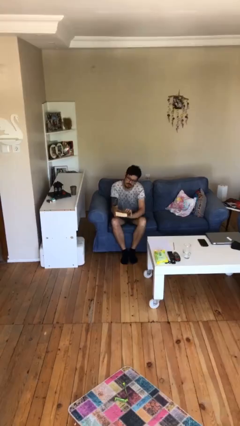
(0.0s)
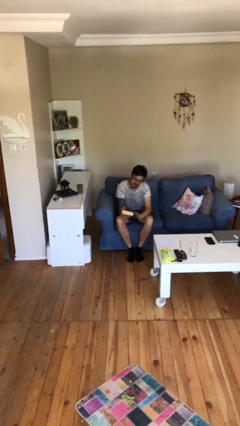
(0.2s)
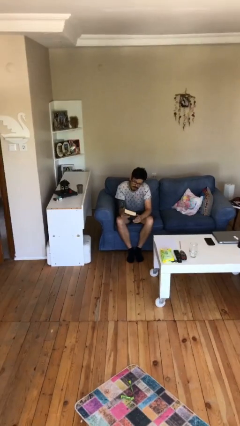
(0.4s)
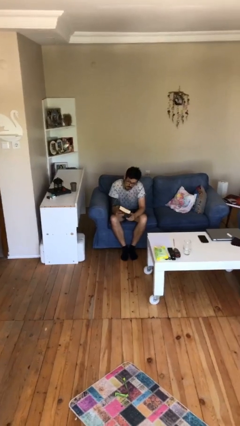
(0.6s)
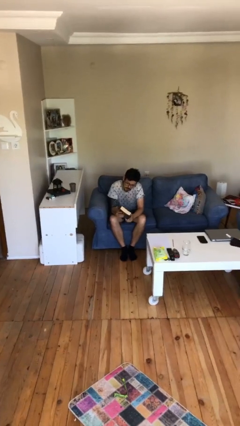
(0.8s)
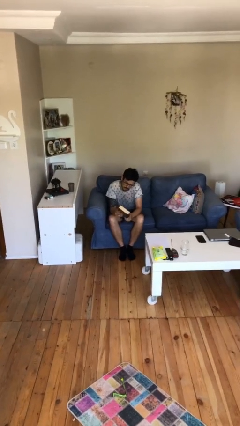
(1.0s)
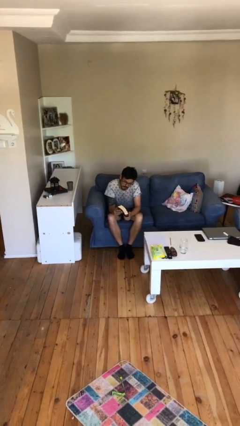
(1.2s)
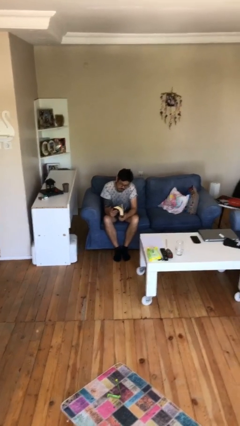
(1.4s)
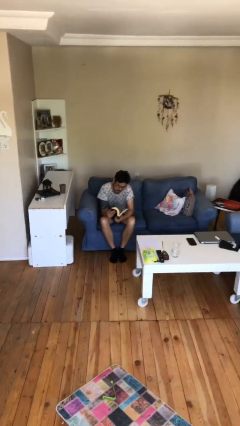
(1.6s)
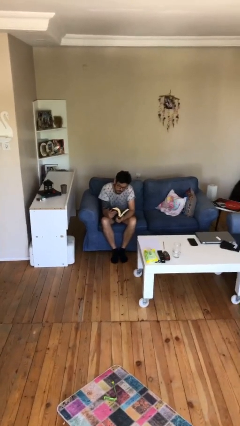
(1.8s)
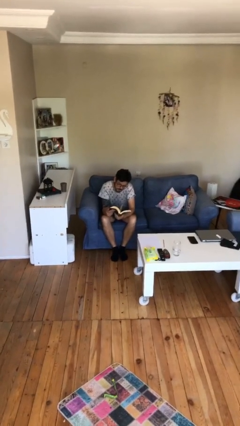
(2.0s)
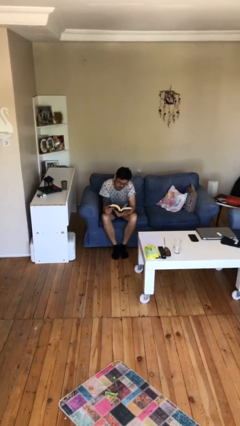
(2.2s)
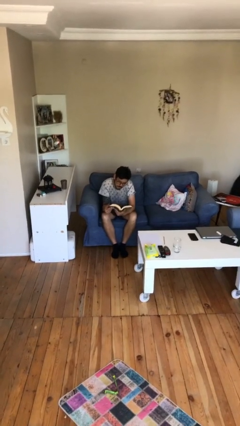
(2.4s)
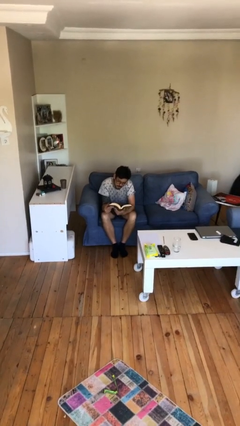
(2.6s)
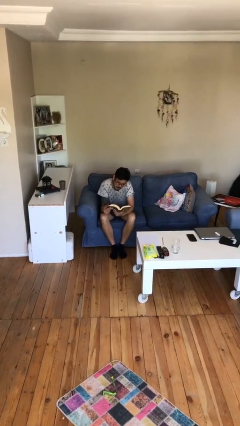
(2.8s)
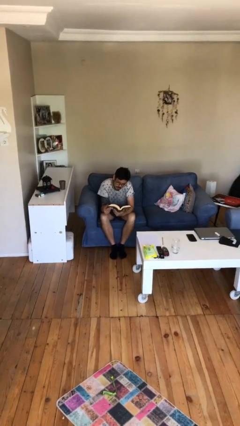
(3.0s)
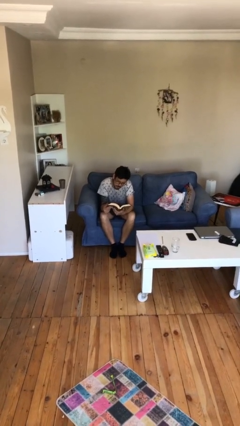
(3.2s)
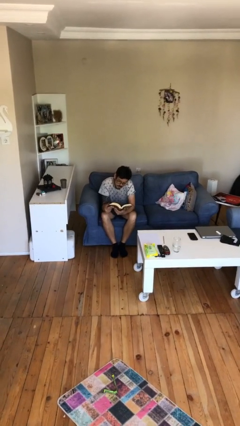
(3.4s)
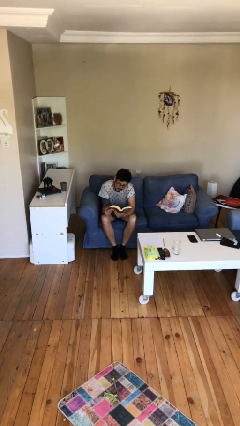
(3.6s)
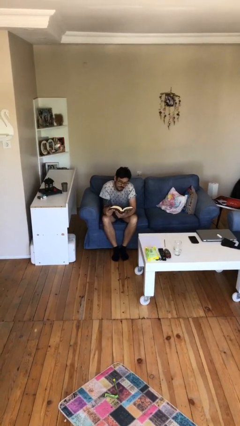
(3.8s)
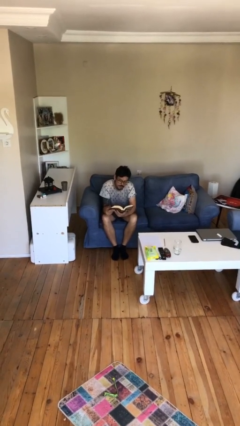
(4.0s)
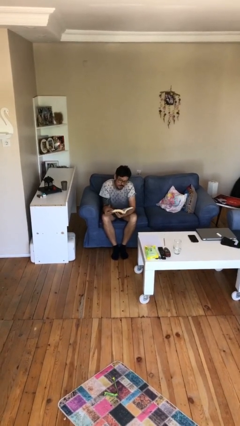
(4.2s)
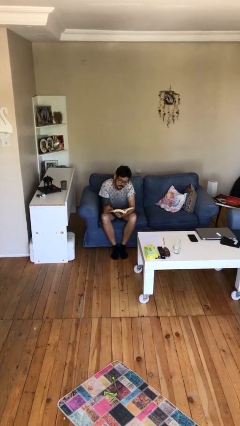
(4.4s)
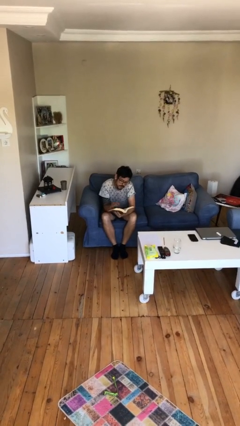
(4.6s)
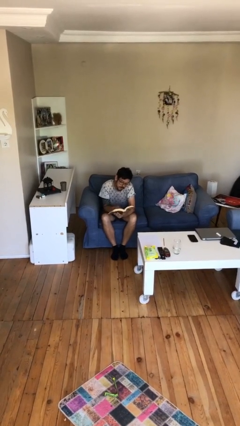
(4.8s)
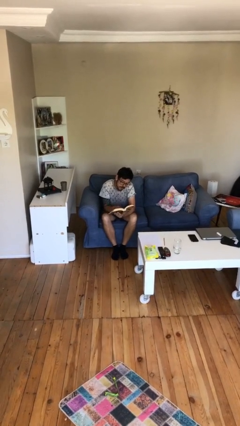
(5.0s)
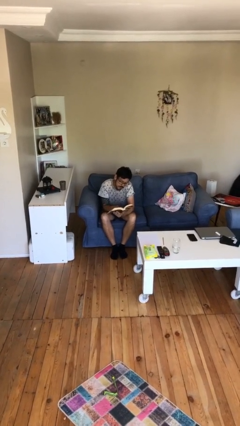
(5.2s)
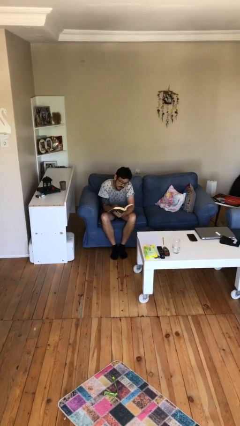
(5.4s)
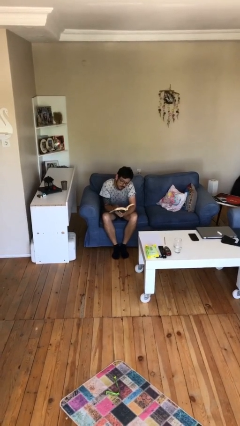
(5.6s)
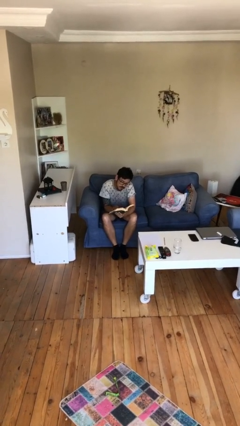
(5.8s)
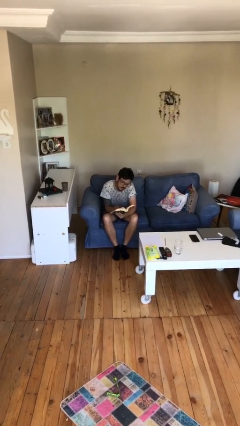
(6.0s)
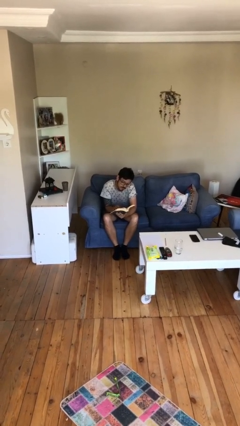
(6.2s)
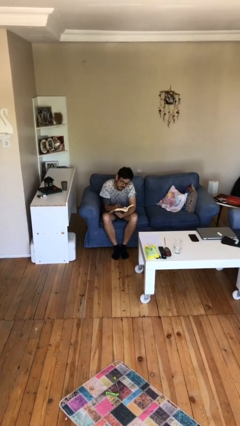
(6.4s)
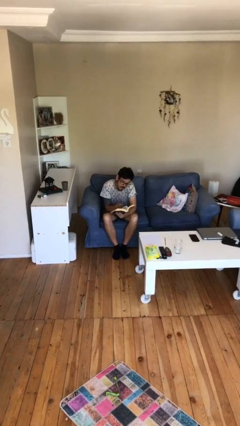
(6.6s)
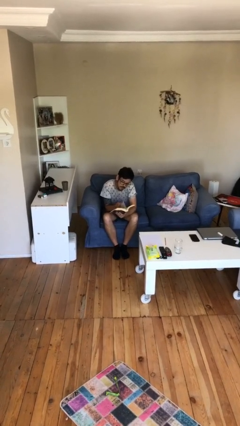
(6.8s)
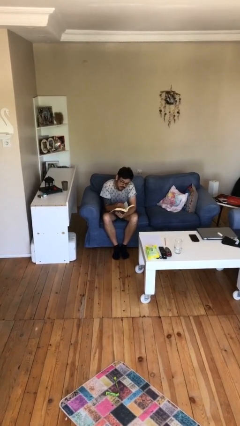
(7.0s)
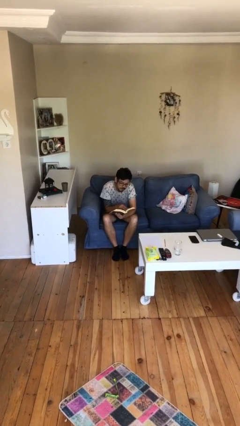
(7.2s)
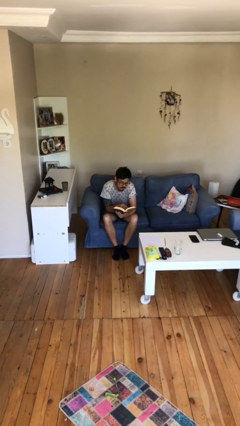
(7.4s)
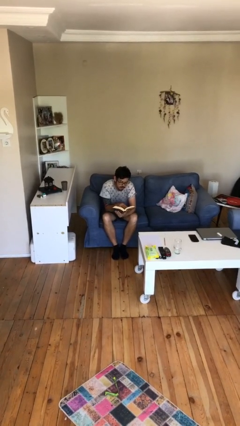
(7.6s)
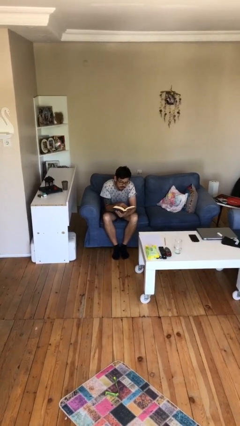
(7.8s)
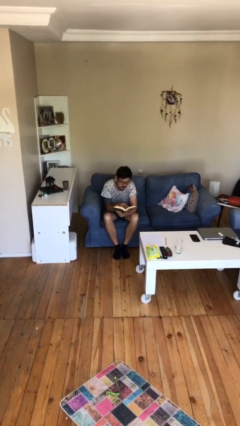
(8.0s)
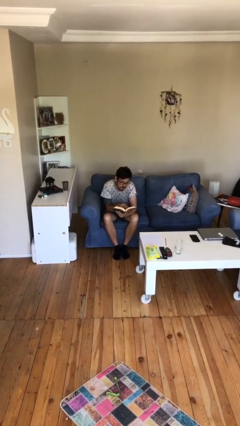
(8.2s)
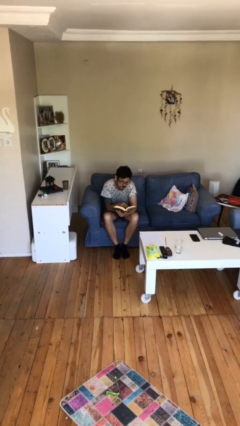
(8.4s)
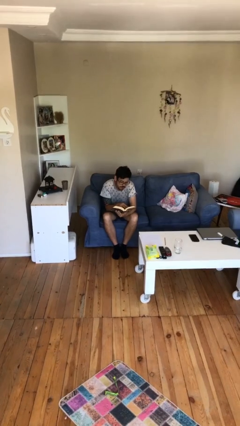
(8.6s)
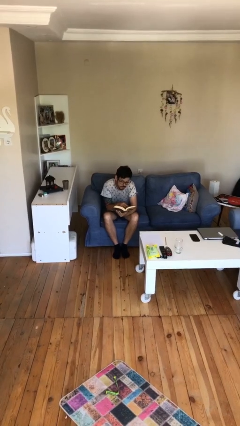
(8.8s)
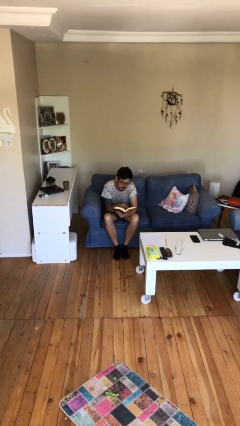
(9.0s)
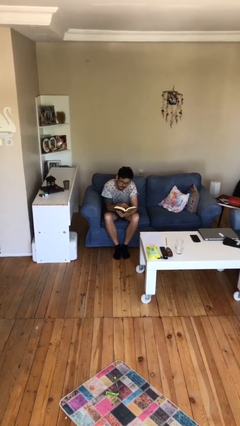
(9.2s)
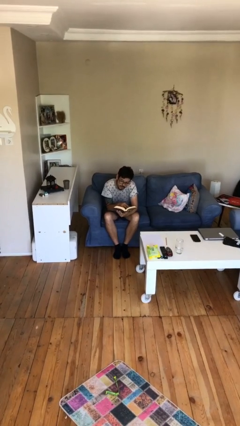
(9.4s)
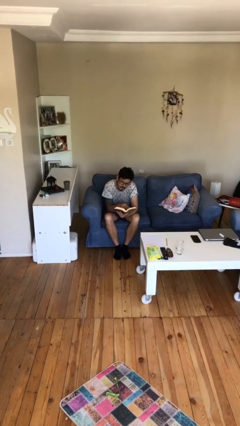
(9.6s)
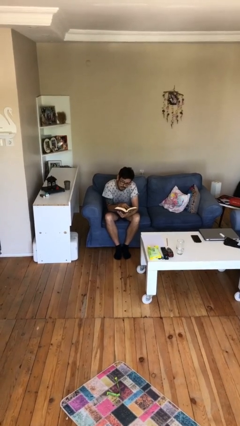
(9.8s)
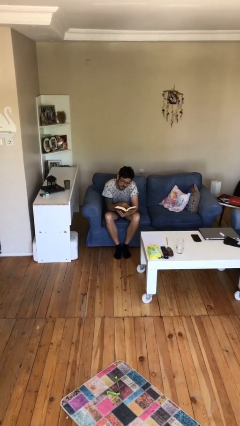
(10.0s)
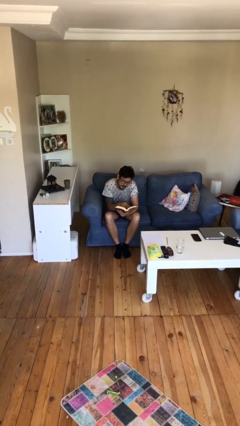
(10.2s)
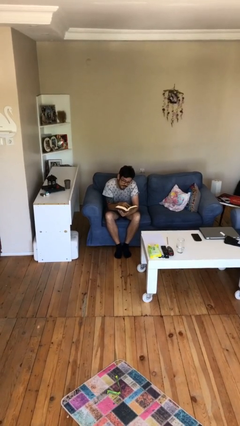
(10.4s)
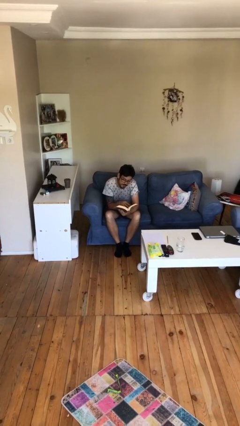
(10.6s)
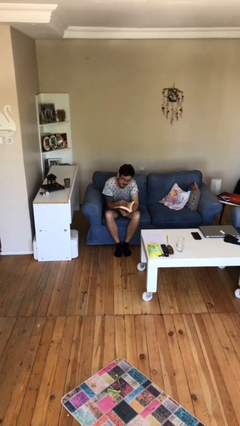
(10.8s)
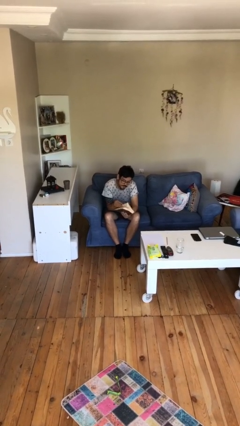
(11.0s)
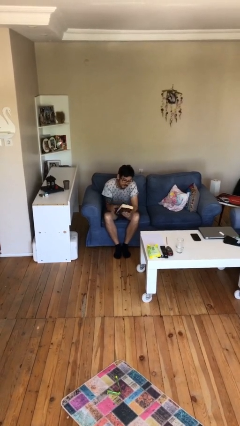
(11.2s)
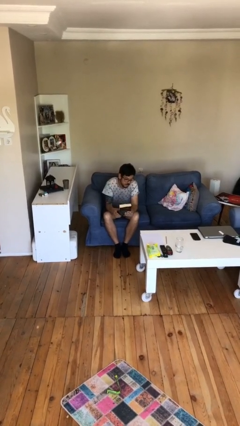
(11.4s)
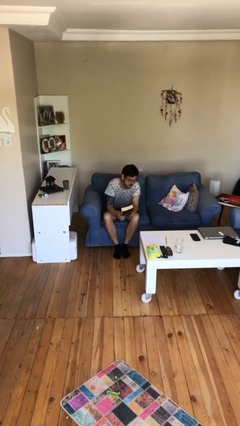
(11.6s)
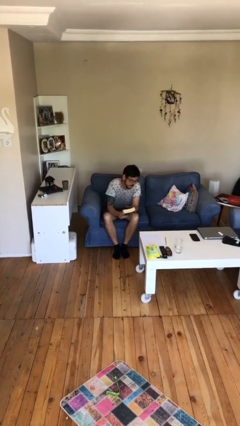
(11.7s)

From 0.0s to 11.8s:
person reads document

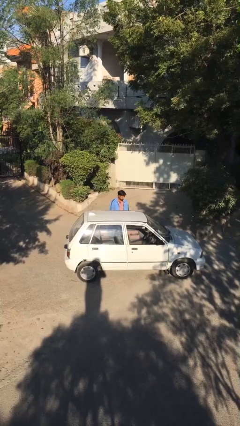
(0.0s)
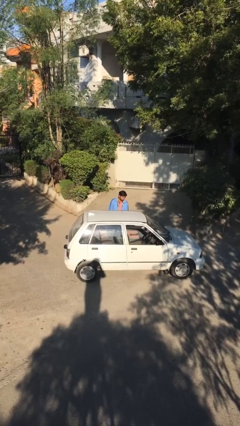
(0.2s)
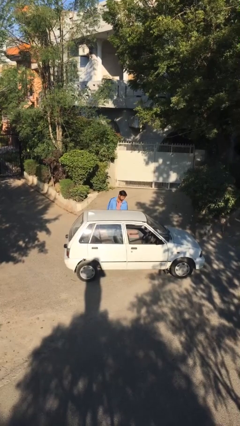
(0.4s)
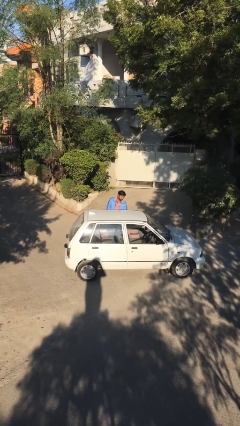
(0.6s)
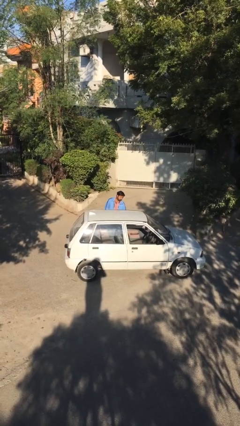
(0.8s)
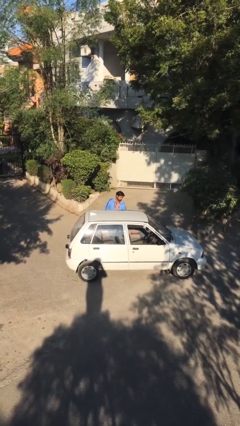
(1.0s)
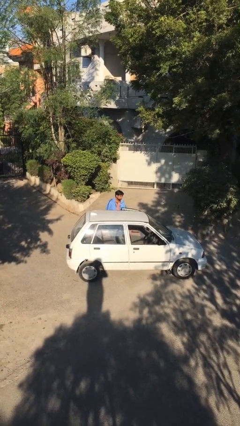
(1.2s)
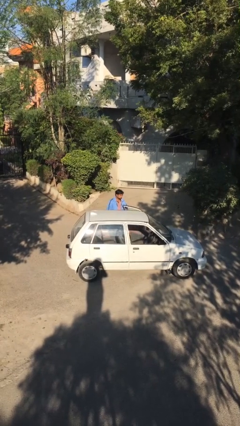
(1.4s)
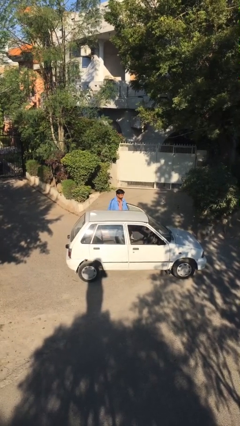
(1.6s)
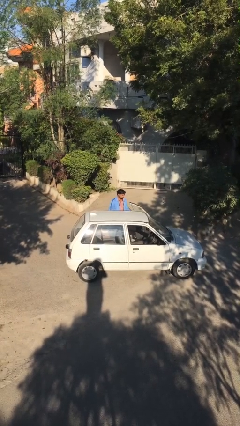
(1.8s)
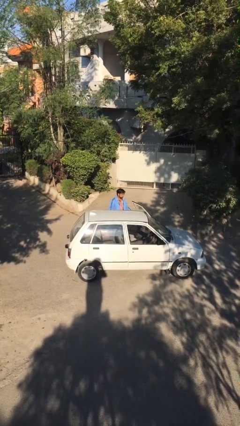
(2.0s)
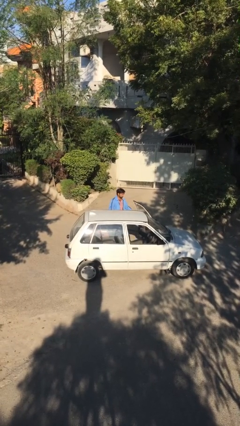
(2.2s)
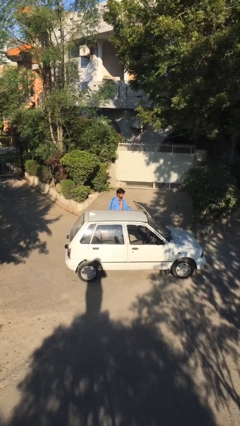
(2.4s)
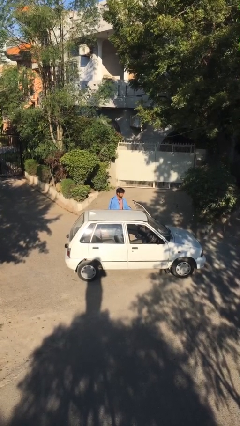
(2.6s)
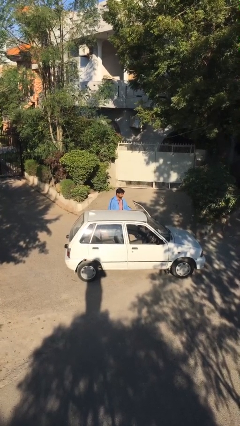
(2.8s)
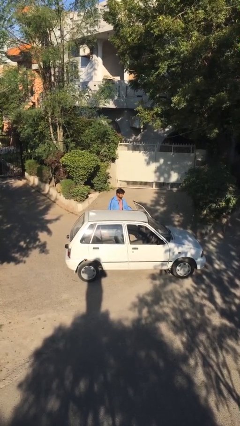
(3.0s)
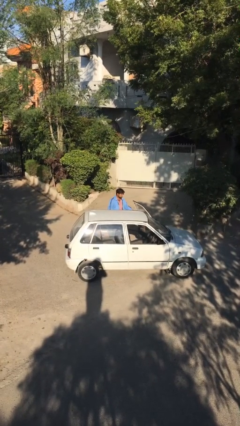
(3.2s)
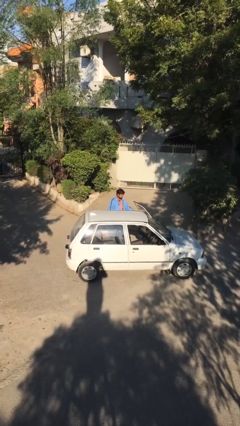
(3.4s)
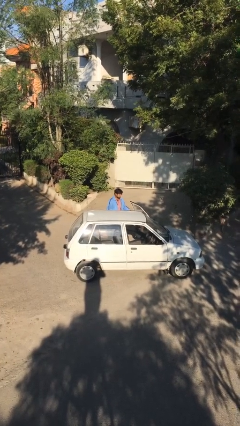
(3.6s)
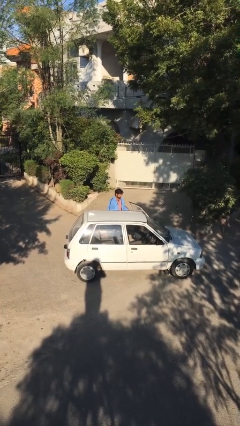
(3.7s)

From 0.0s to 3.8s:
person opens car door

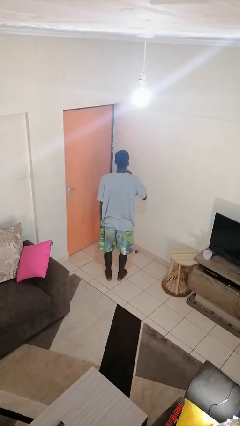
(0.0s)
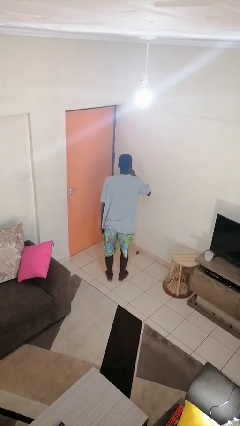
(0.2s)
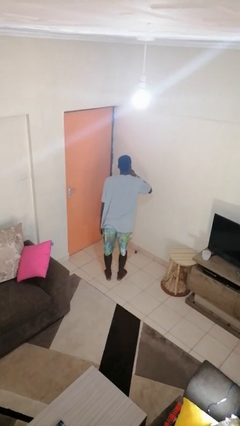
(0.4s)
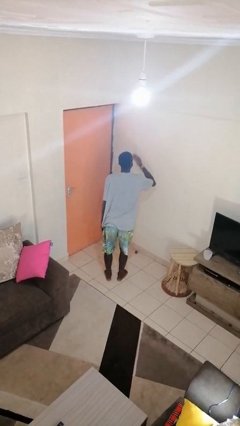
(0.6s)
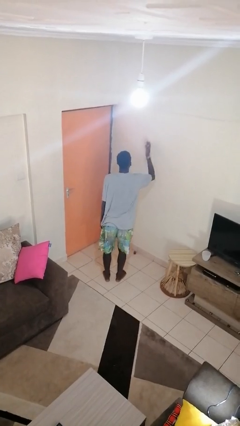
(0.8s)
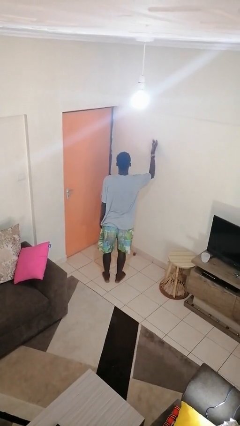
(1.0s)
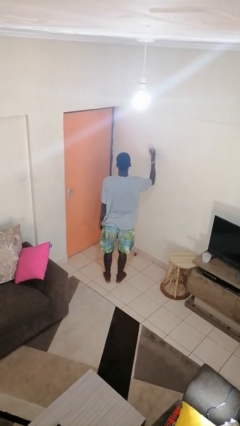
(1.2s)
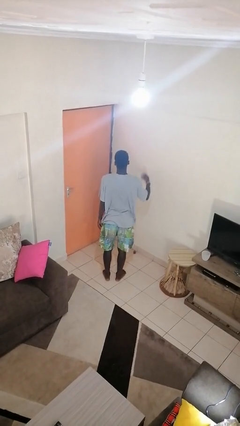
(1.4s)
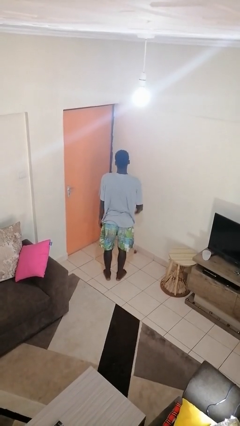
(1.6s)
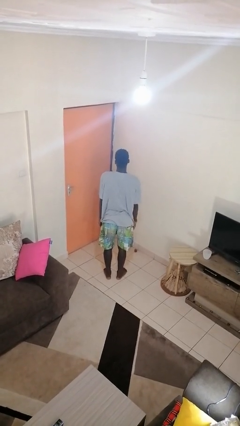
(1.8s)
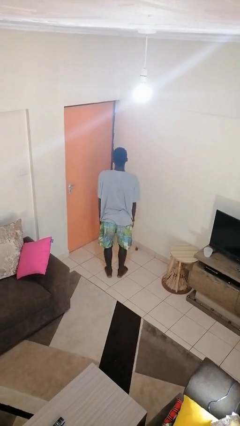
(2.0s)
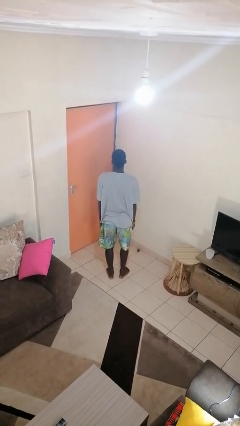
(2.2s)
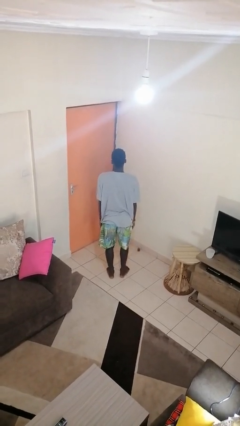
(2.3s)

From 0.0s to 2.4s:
person gestures blow kiss
